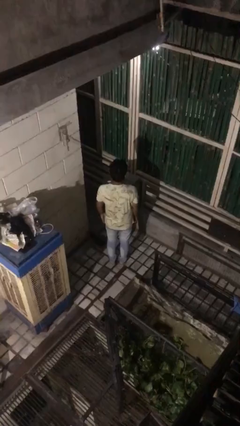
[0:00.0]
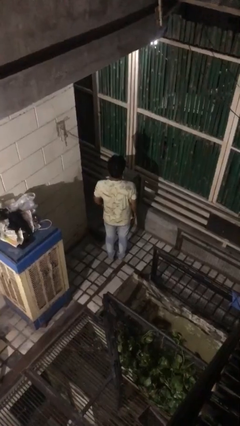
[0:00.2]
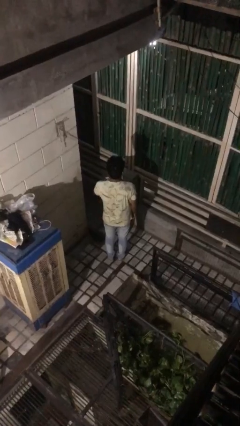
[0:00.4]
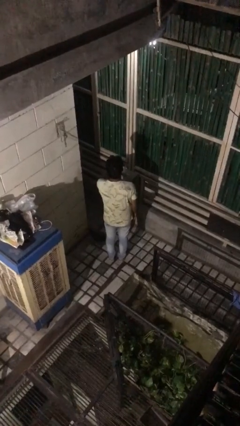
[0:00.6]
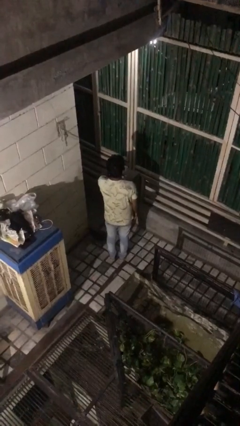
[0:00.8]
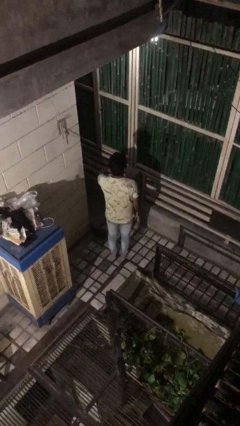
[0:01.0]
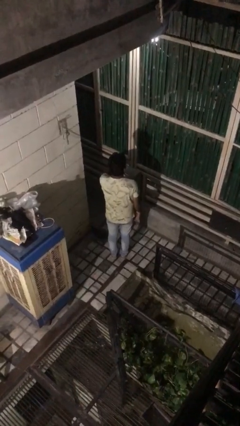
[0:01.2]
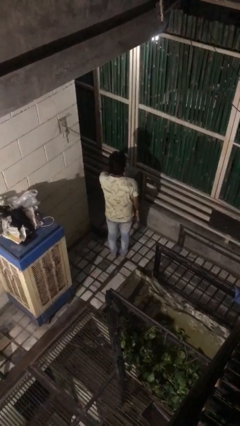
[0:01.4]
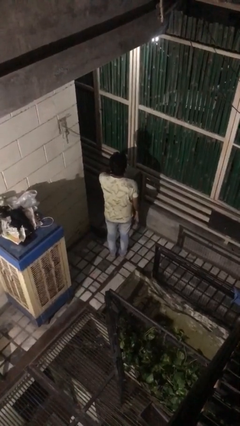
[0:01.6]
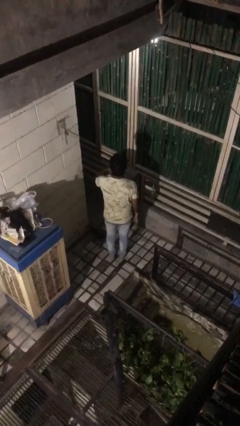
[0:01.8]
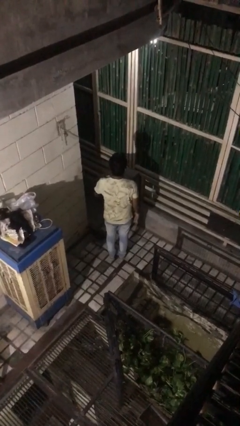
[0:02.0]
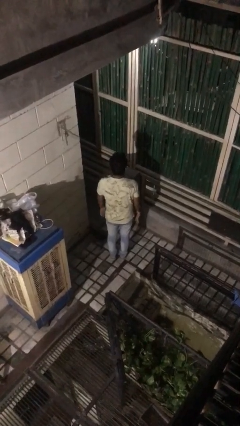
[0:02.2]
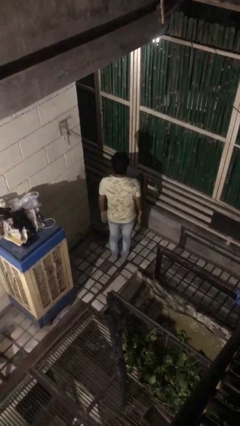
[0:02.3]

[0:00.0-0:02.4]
person gestures cut

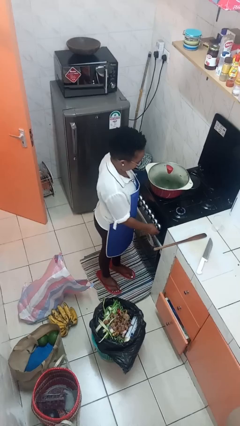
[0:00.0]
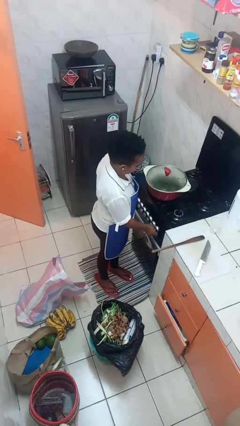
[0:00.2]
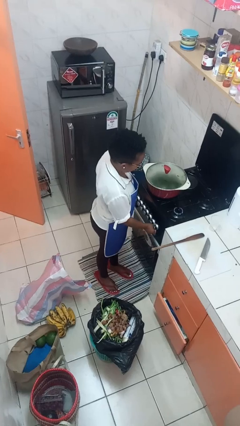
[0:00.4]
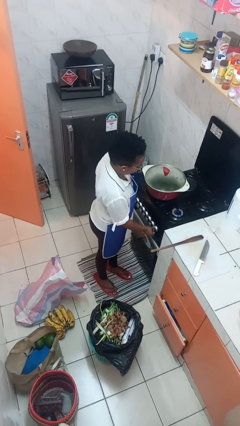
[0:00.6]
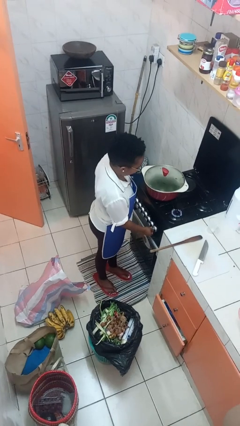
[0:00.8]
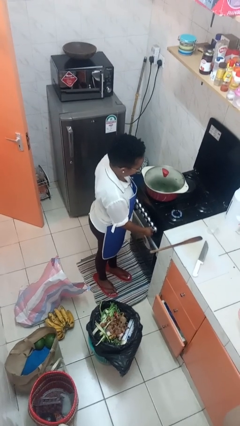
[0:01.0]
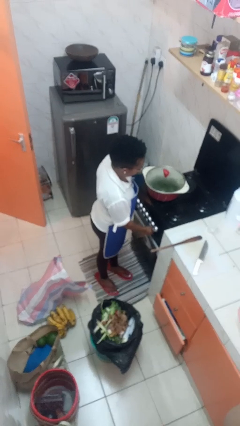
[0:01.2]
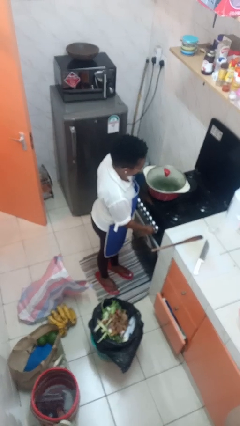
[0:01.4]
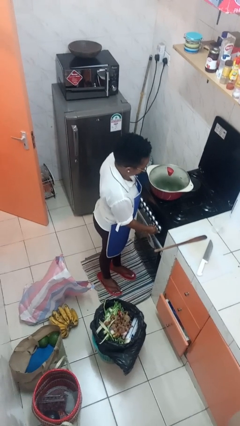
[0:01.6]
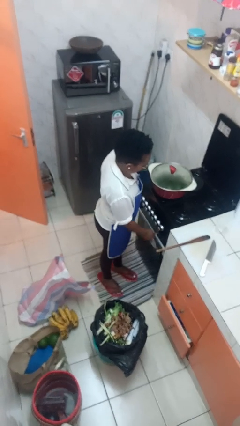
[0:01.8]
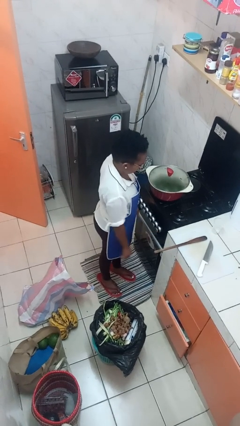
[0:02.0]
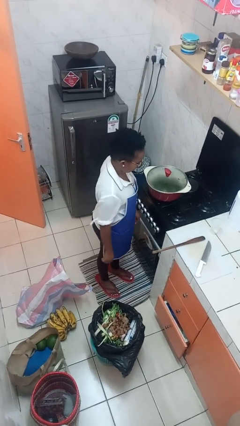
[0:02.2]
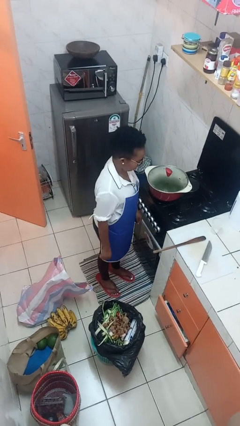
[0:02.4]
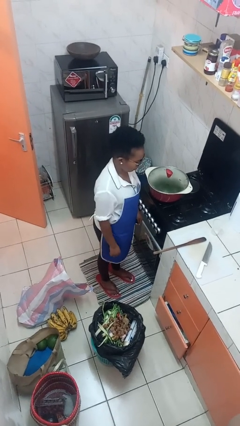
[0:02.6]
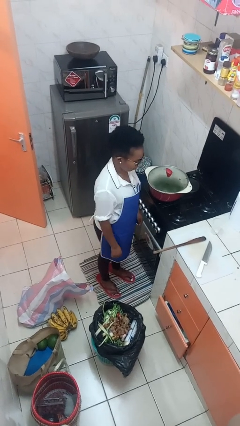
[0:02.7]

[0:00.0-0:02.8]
person turns off stovetop

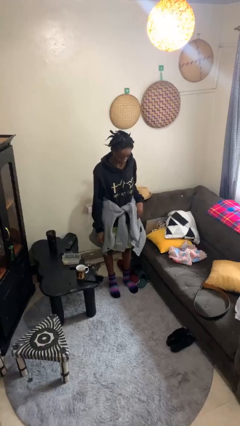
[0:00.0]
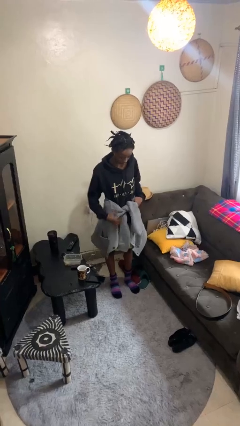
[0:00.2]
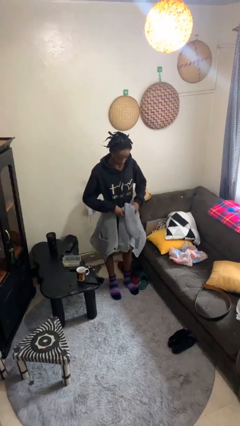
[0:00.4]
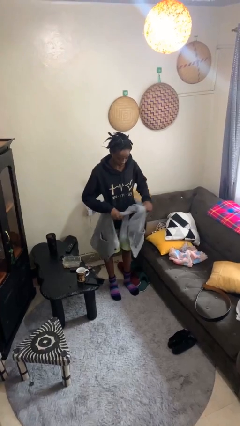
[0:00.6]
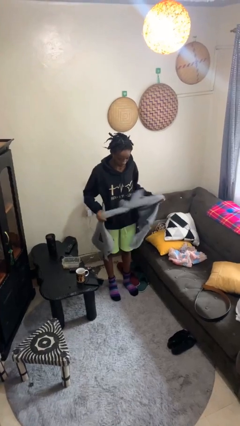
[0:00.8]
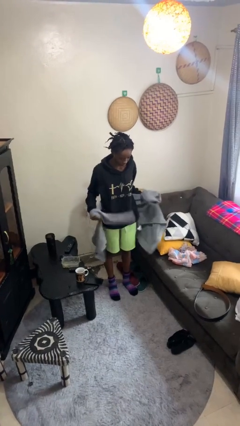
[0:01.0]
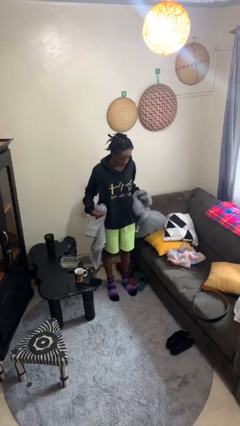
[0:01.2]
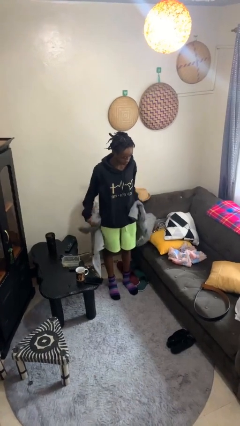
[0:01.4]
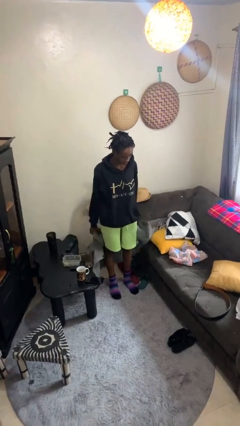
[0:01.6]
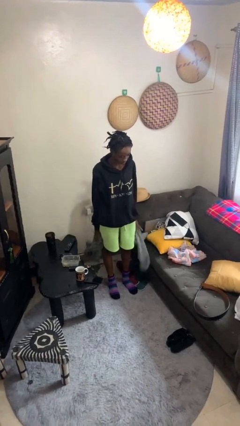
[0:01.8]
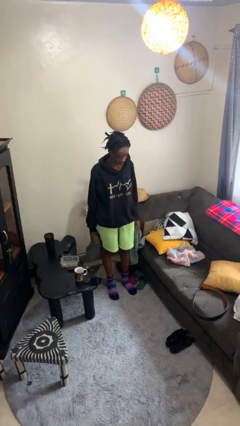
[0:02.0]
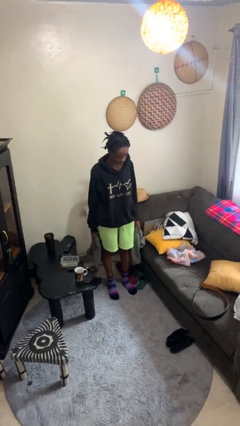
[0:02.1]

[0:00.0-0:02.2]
person unties jacket around waist

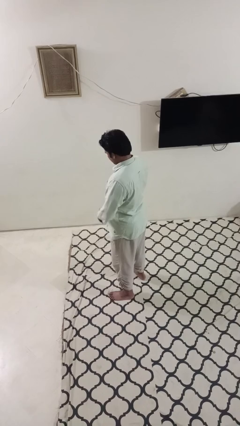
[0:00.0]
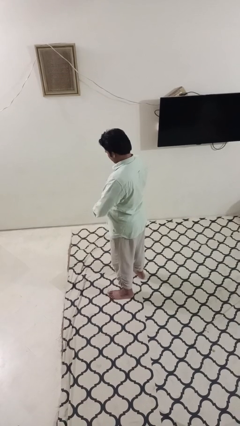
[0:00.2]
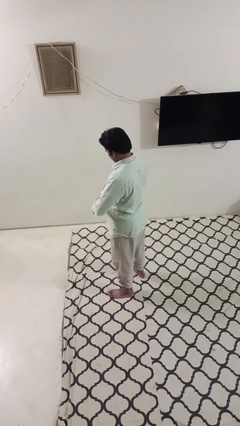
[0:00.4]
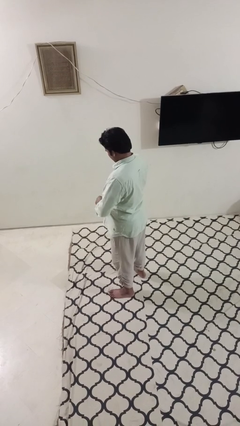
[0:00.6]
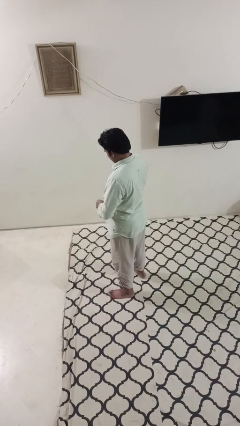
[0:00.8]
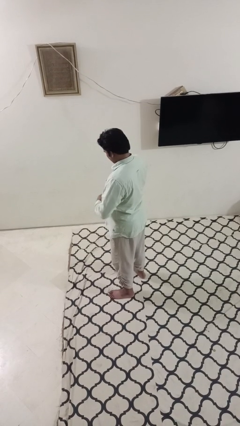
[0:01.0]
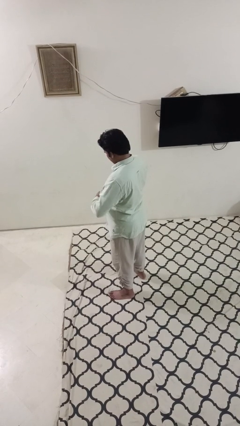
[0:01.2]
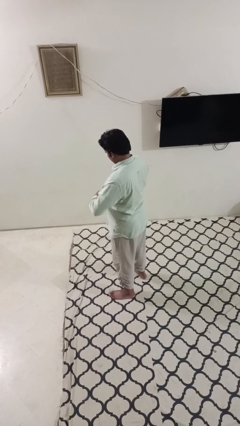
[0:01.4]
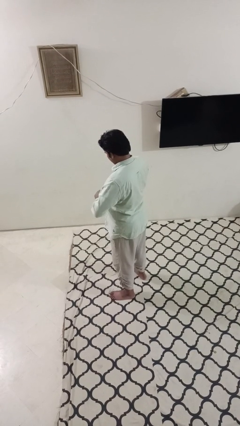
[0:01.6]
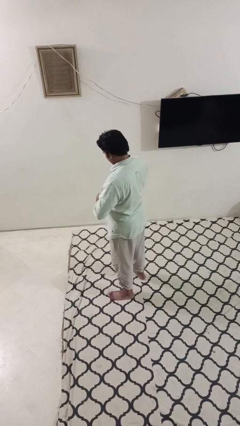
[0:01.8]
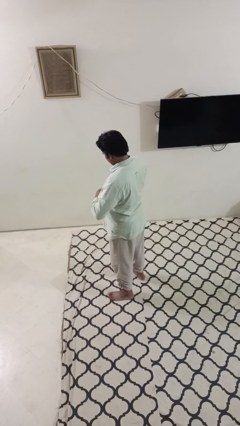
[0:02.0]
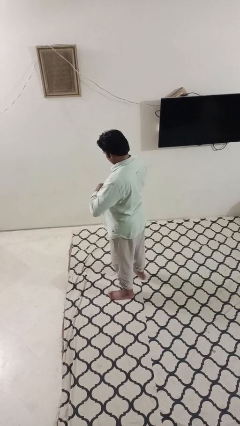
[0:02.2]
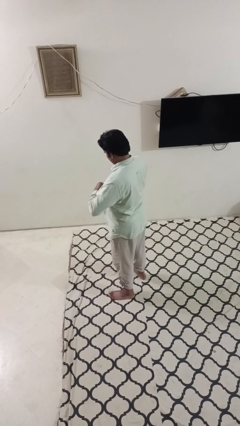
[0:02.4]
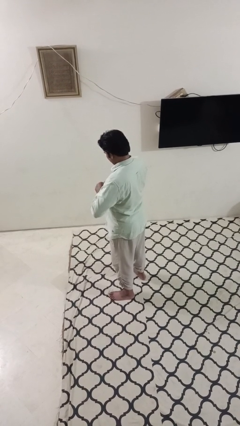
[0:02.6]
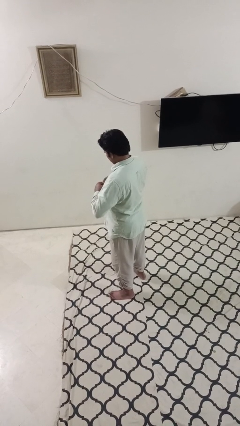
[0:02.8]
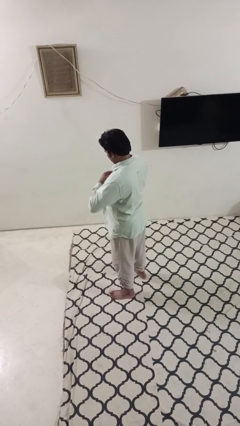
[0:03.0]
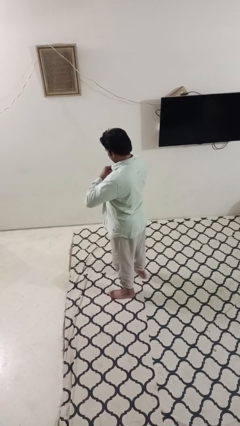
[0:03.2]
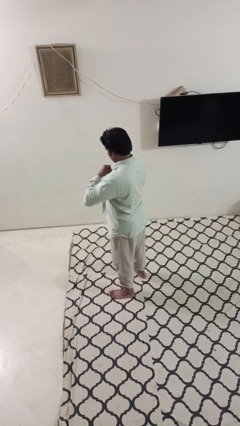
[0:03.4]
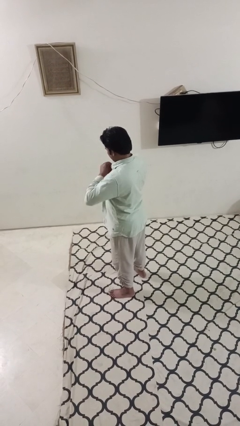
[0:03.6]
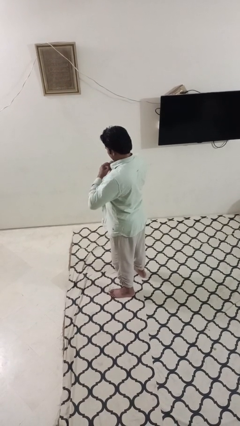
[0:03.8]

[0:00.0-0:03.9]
person unbuttons shirt

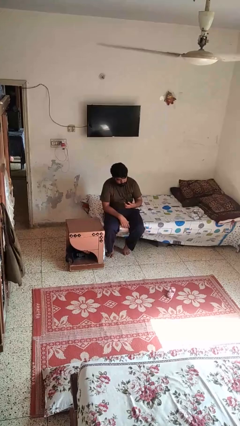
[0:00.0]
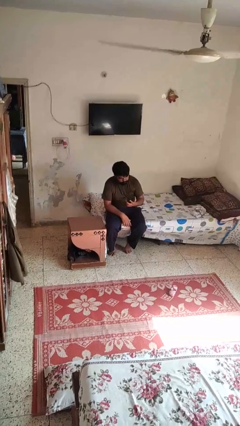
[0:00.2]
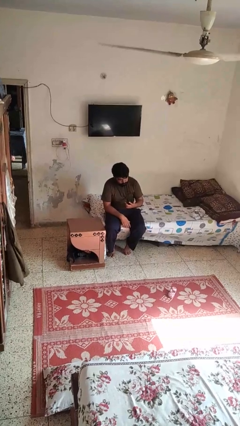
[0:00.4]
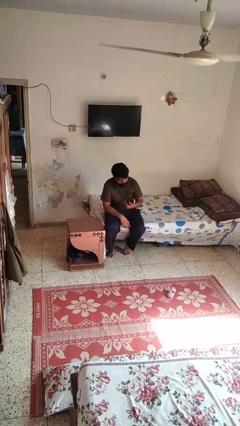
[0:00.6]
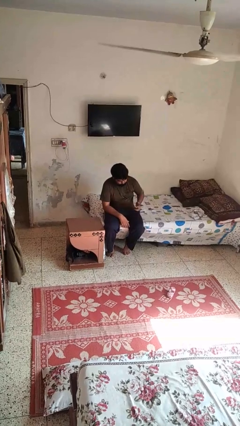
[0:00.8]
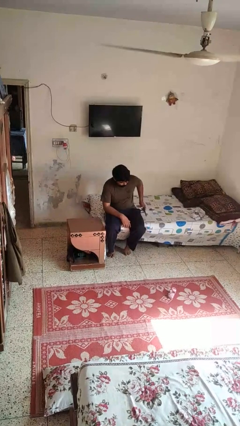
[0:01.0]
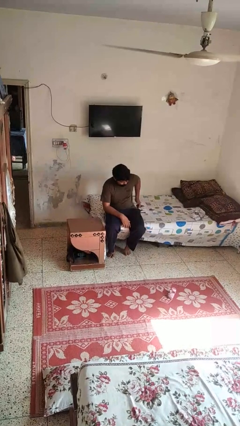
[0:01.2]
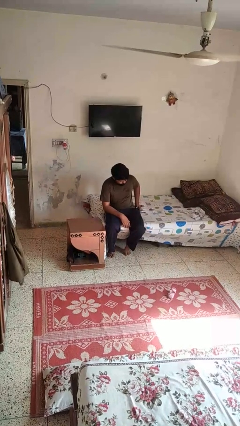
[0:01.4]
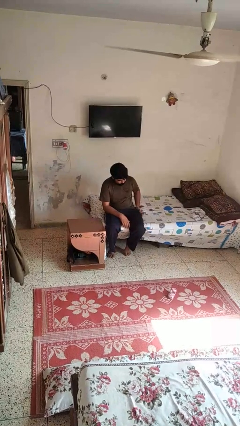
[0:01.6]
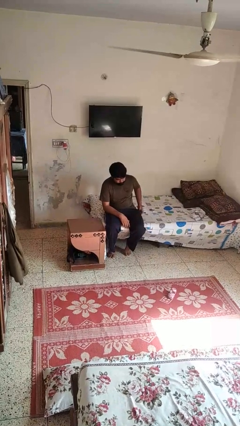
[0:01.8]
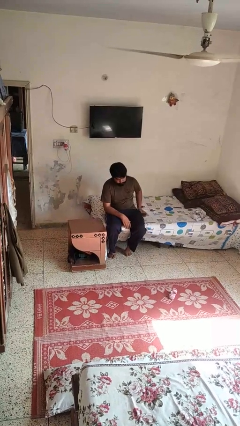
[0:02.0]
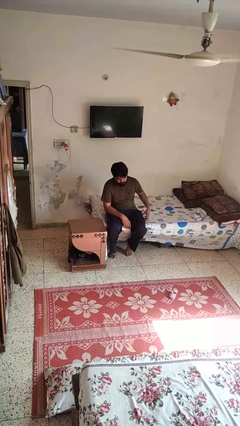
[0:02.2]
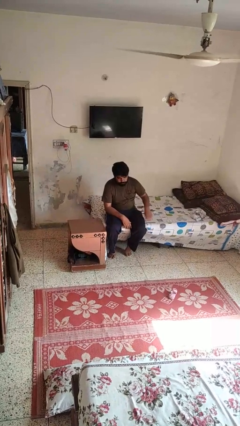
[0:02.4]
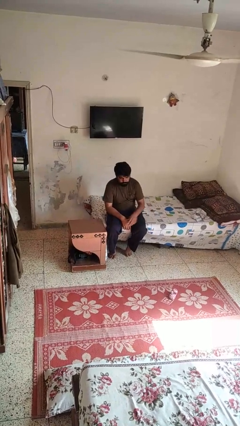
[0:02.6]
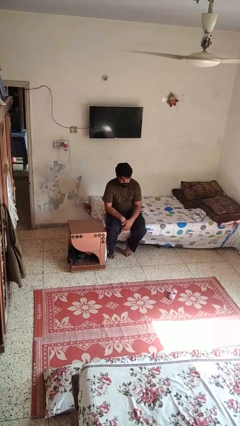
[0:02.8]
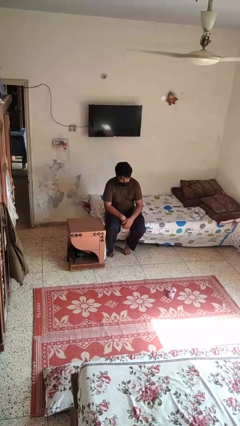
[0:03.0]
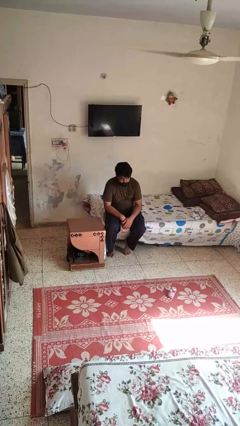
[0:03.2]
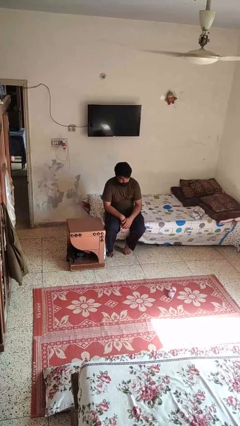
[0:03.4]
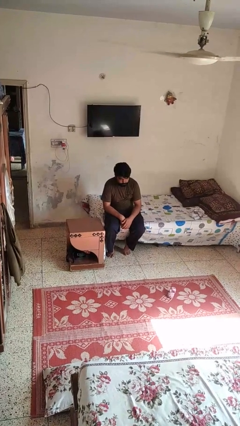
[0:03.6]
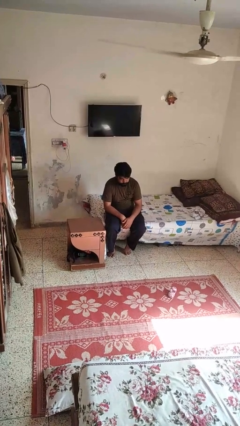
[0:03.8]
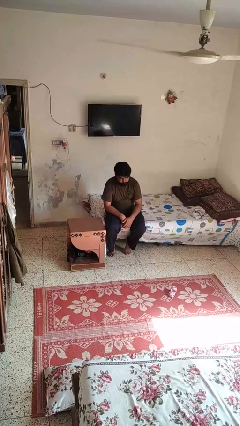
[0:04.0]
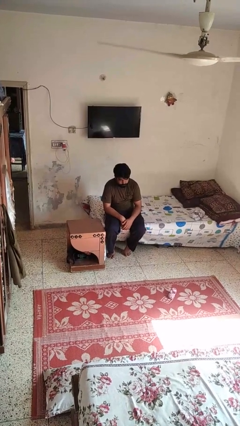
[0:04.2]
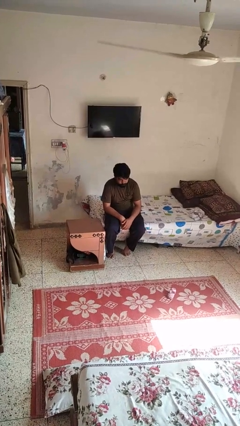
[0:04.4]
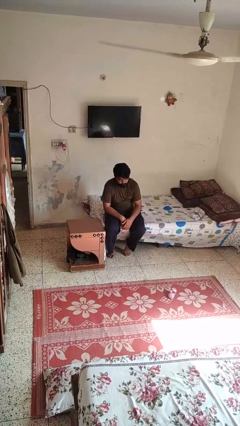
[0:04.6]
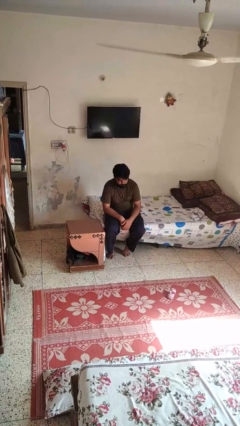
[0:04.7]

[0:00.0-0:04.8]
person puts phone into pocket

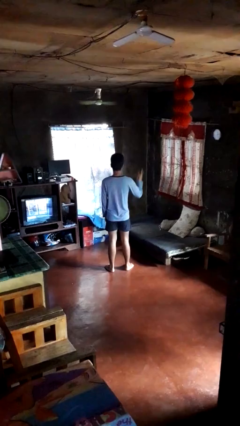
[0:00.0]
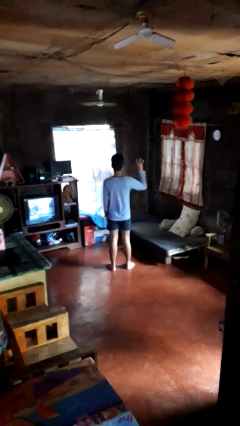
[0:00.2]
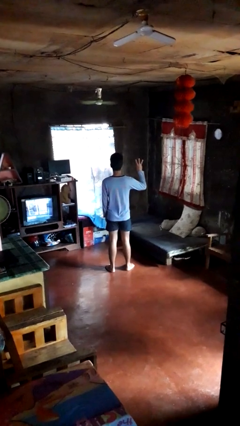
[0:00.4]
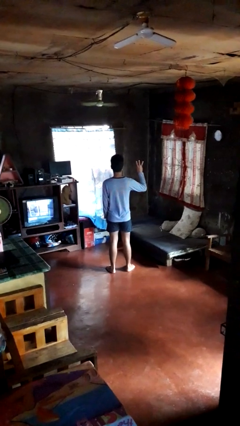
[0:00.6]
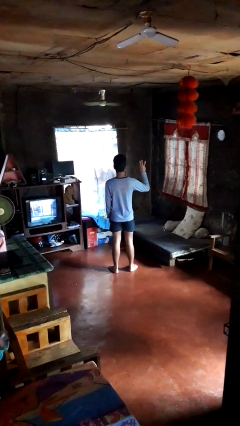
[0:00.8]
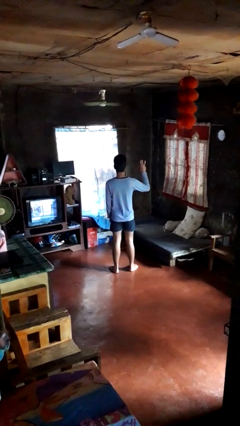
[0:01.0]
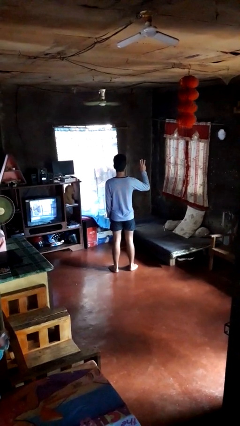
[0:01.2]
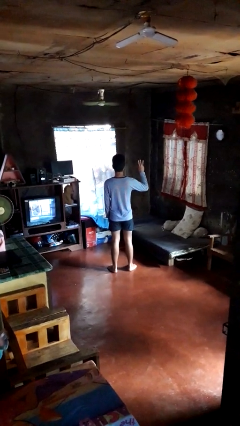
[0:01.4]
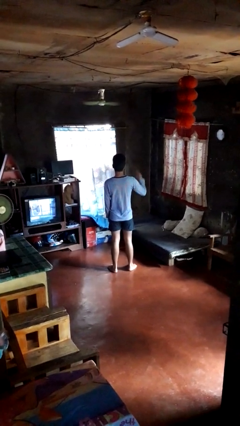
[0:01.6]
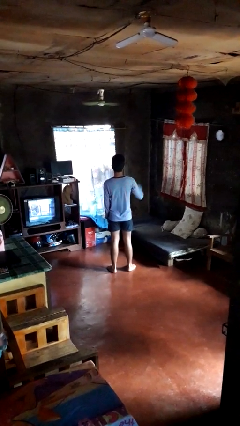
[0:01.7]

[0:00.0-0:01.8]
person gestures number three
